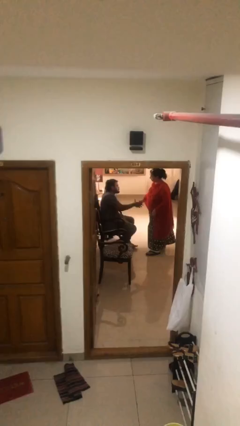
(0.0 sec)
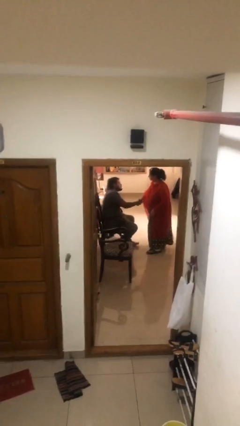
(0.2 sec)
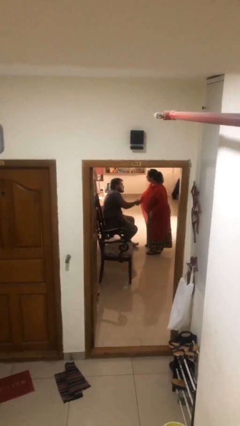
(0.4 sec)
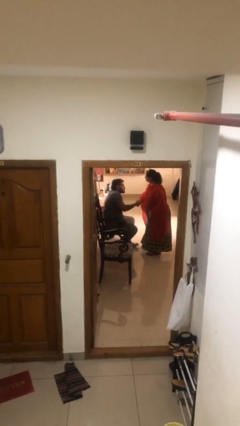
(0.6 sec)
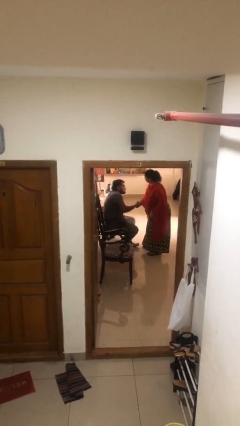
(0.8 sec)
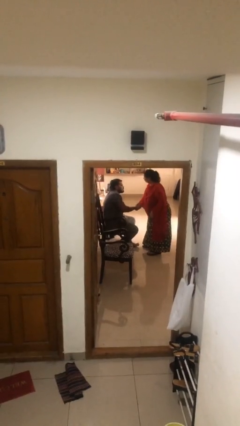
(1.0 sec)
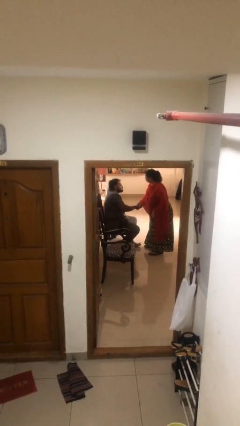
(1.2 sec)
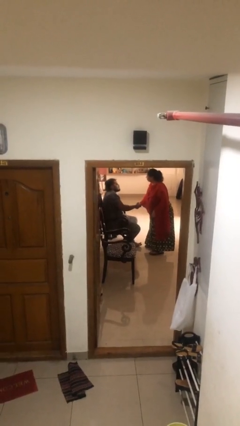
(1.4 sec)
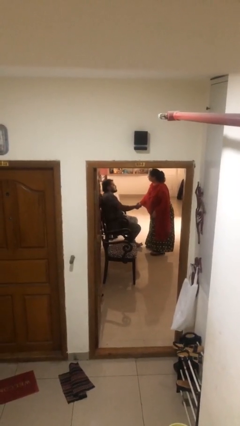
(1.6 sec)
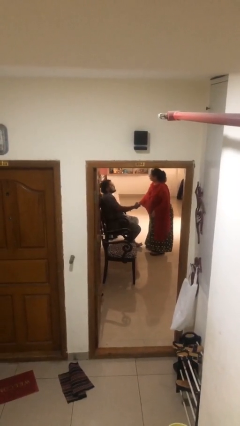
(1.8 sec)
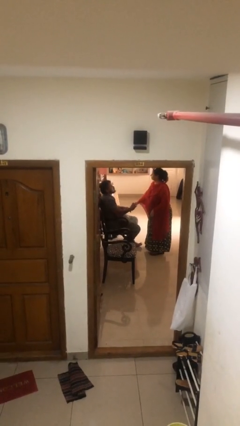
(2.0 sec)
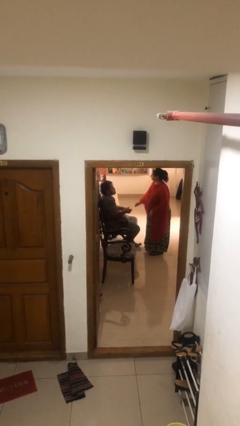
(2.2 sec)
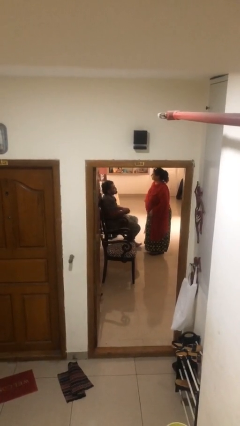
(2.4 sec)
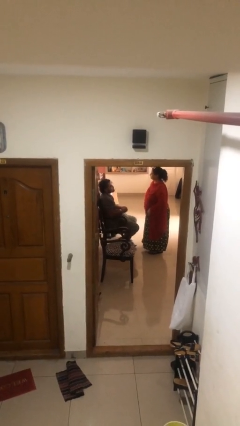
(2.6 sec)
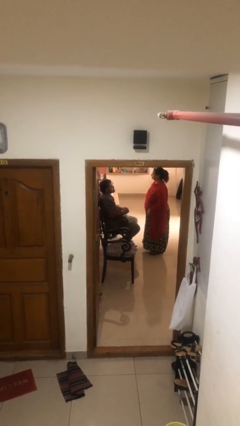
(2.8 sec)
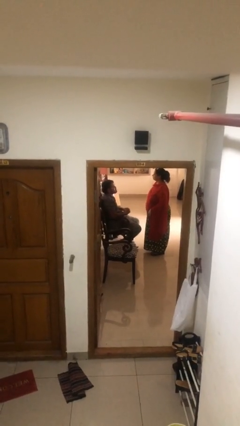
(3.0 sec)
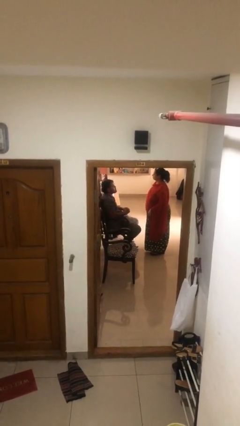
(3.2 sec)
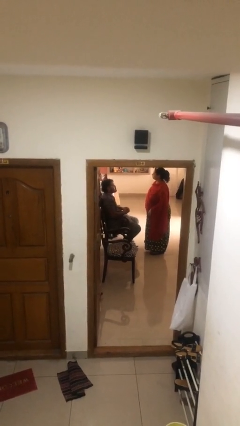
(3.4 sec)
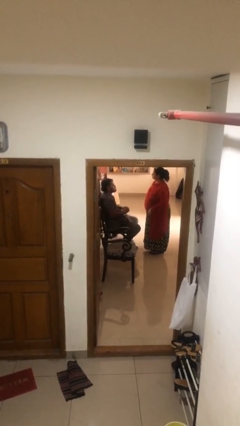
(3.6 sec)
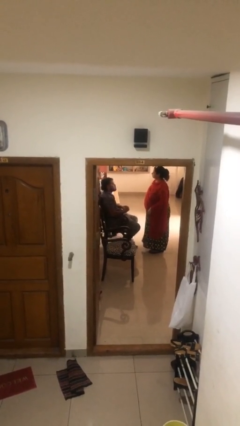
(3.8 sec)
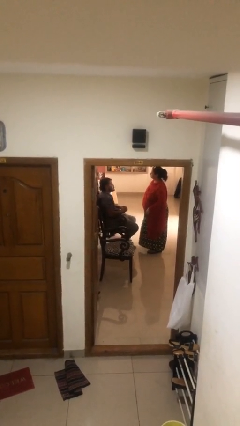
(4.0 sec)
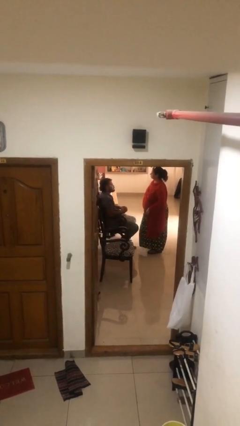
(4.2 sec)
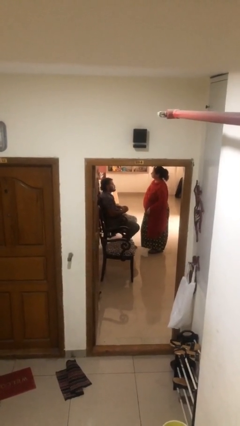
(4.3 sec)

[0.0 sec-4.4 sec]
person shakes hand

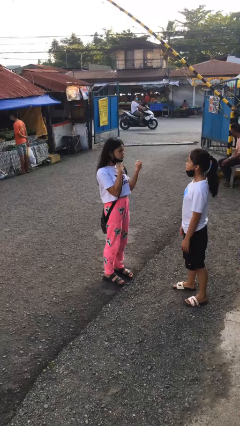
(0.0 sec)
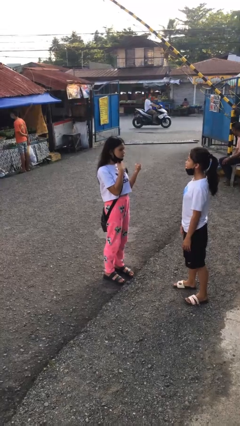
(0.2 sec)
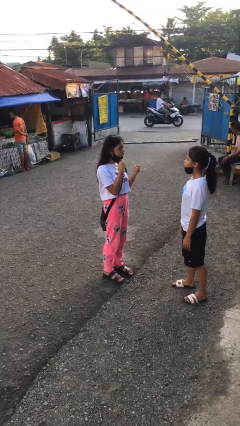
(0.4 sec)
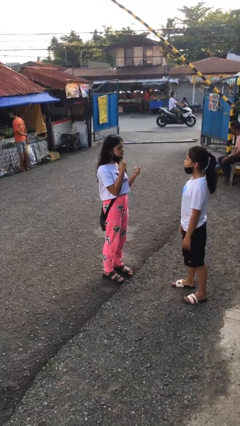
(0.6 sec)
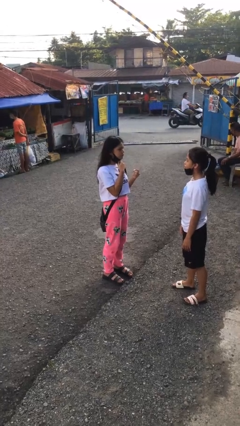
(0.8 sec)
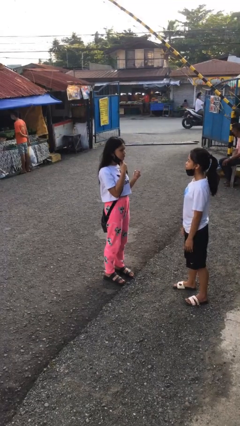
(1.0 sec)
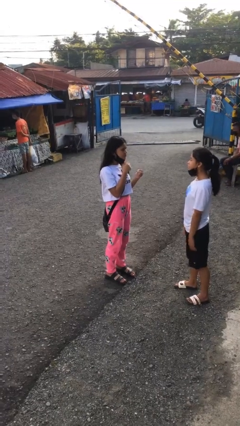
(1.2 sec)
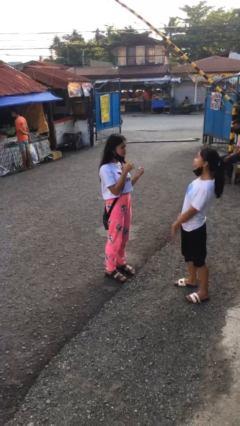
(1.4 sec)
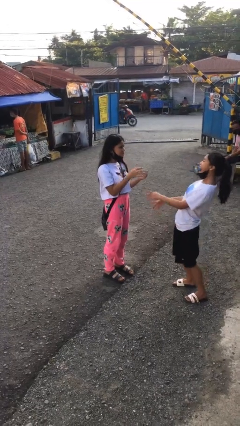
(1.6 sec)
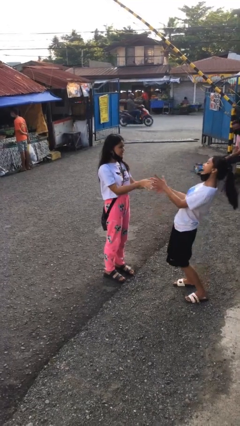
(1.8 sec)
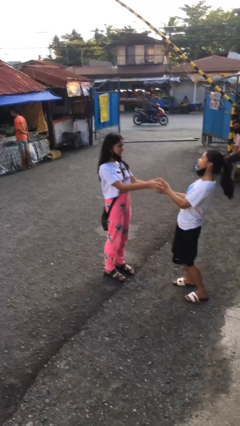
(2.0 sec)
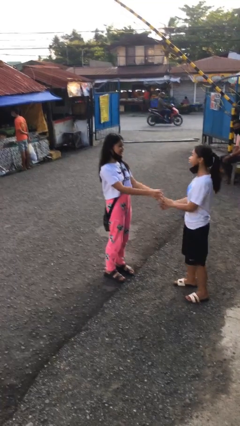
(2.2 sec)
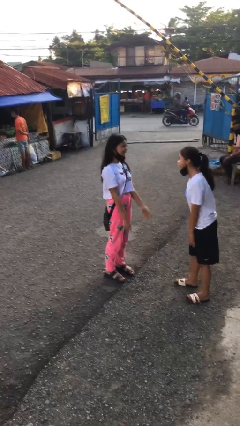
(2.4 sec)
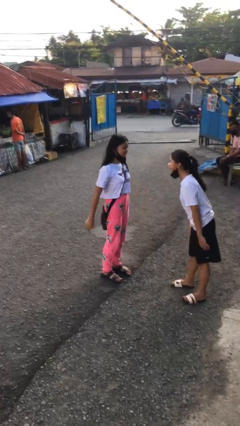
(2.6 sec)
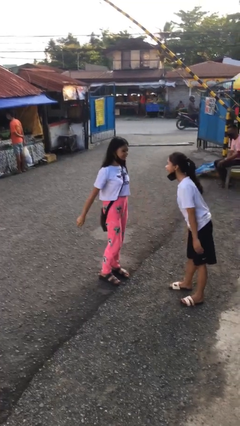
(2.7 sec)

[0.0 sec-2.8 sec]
person laughs with person

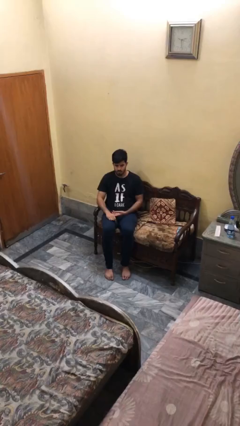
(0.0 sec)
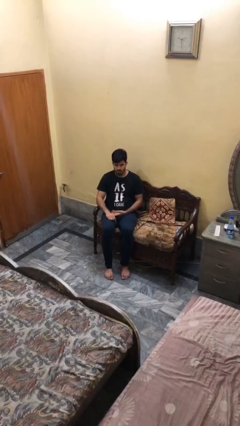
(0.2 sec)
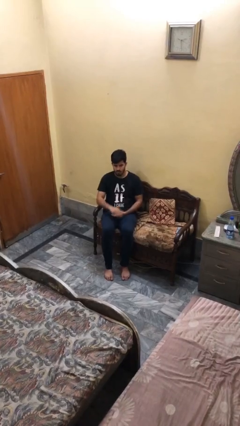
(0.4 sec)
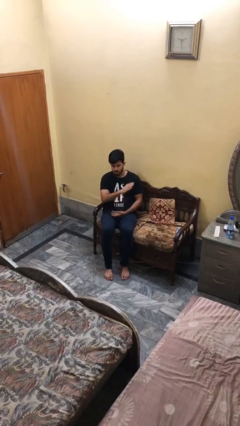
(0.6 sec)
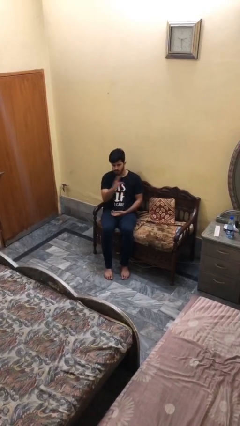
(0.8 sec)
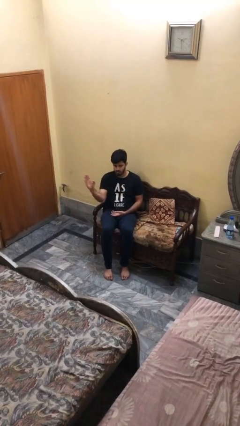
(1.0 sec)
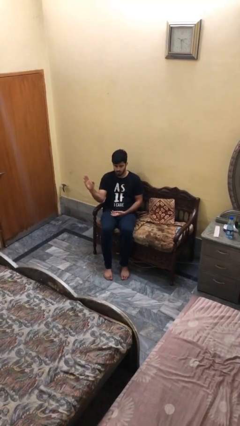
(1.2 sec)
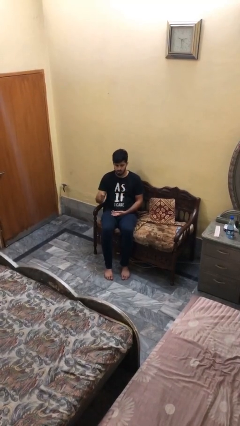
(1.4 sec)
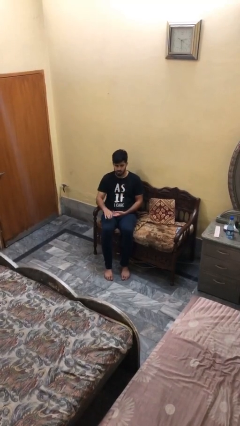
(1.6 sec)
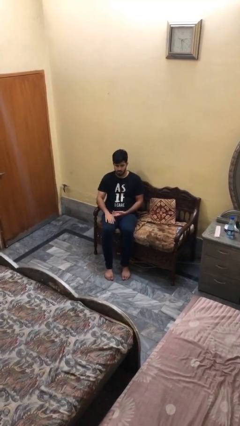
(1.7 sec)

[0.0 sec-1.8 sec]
person gestures swipe right

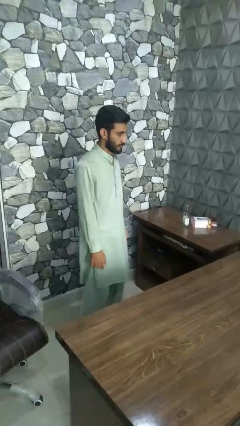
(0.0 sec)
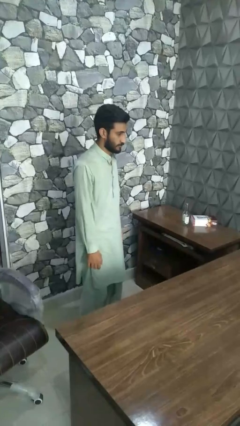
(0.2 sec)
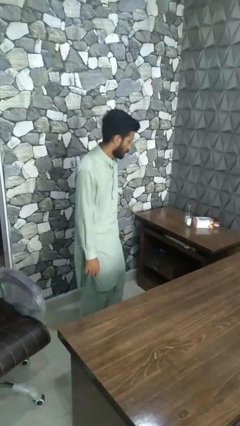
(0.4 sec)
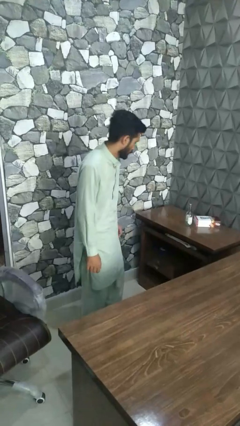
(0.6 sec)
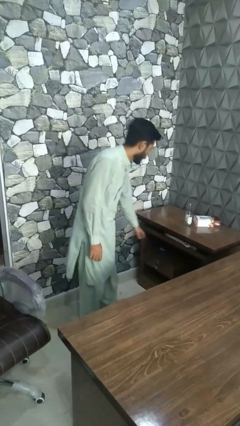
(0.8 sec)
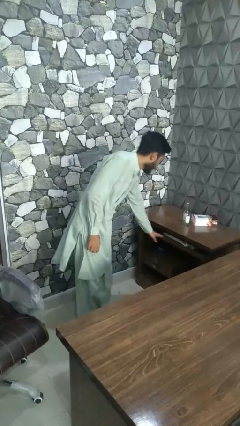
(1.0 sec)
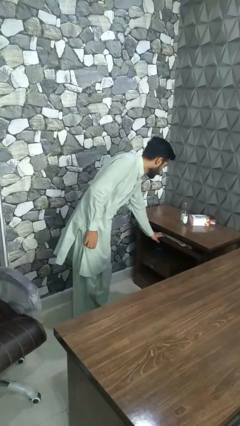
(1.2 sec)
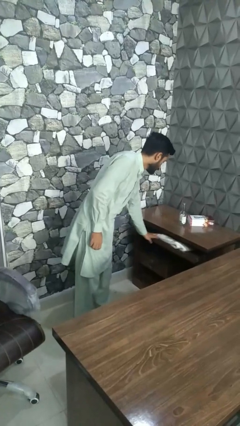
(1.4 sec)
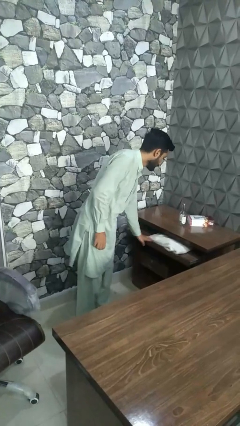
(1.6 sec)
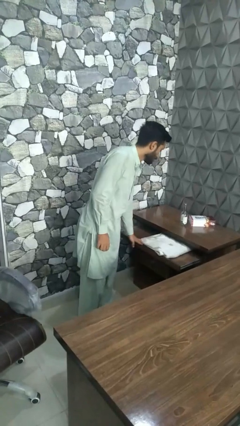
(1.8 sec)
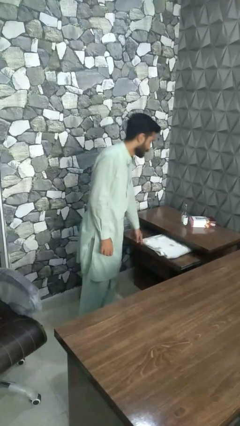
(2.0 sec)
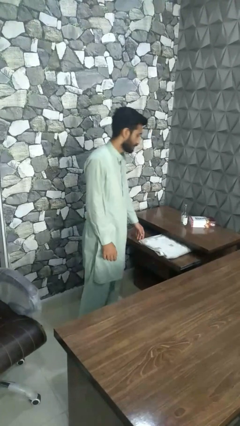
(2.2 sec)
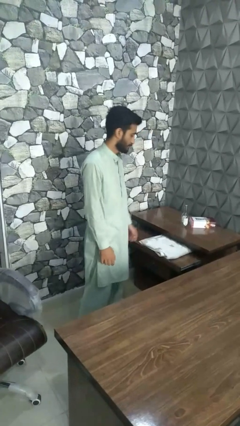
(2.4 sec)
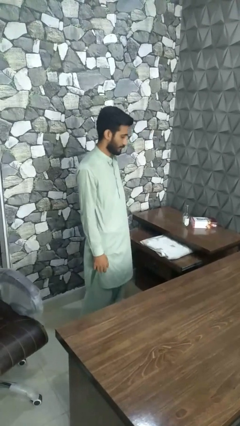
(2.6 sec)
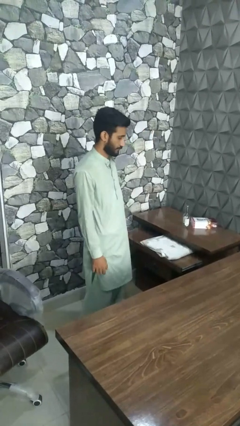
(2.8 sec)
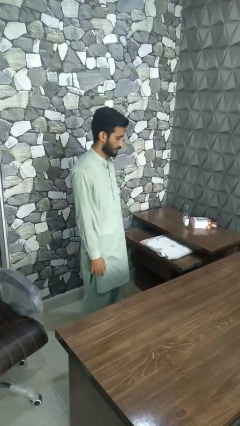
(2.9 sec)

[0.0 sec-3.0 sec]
person opens dresser drawer

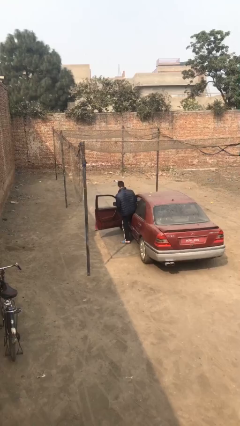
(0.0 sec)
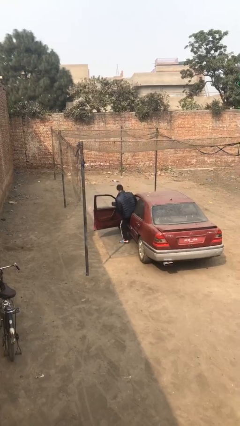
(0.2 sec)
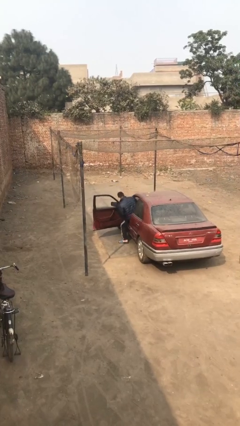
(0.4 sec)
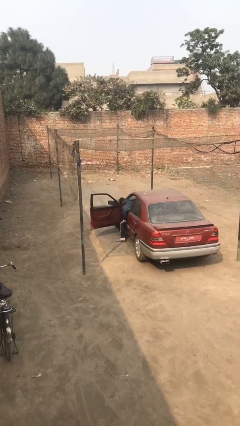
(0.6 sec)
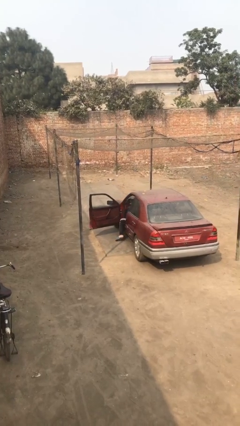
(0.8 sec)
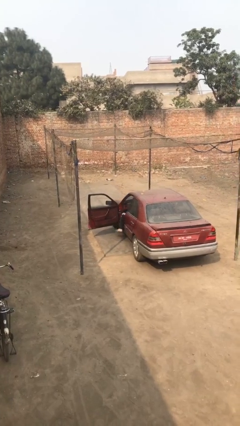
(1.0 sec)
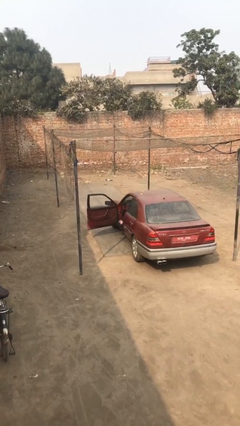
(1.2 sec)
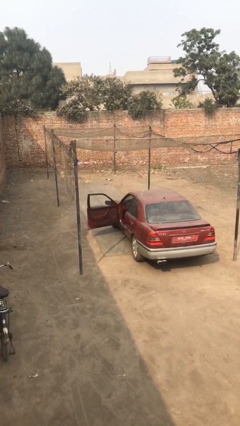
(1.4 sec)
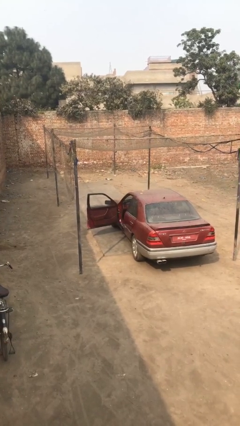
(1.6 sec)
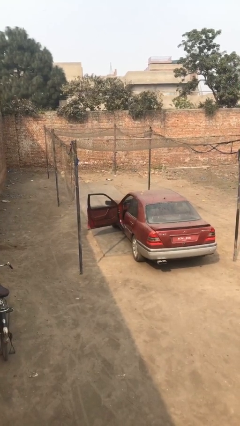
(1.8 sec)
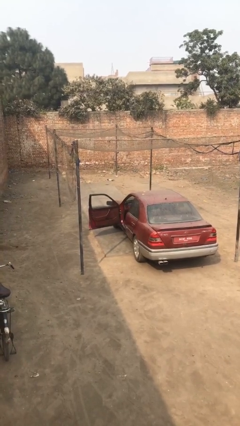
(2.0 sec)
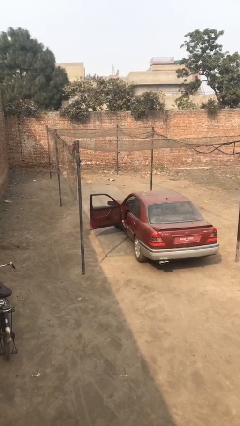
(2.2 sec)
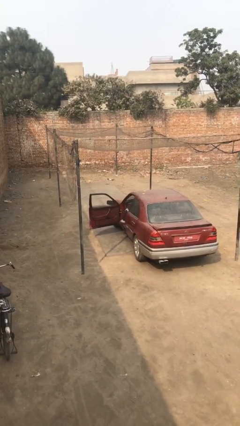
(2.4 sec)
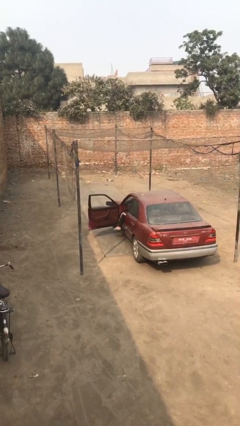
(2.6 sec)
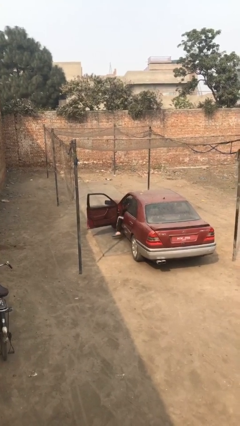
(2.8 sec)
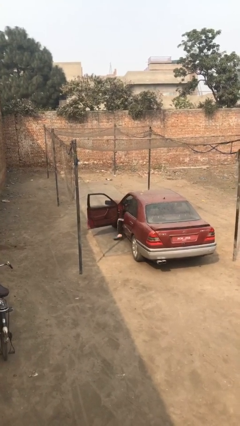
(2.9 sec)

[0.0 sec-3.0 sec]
person enters car

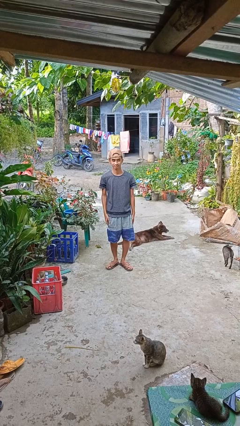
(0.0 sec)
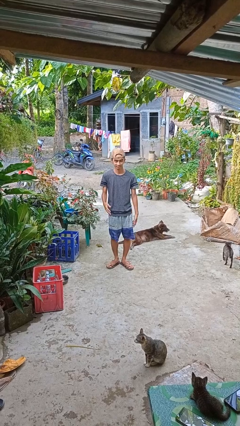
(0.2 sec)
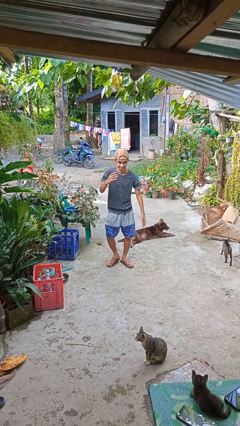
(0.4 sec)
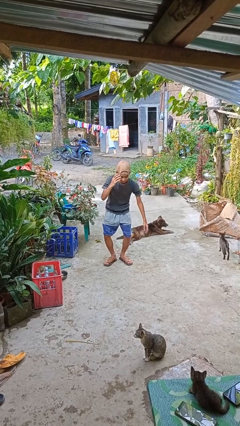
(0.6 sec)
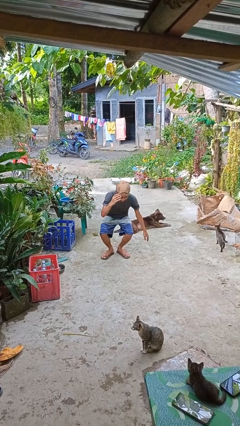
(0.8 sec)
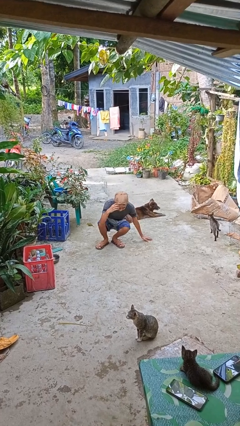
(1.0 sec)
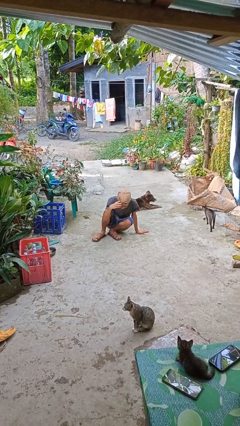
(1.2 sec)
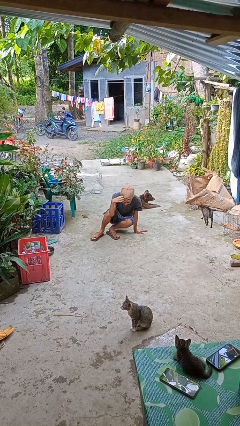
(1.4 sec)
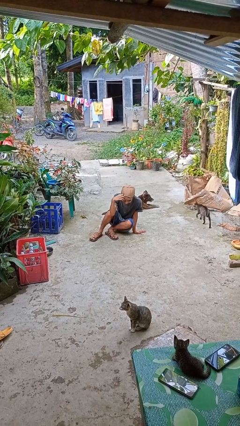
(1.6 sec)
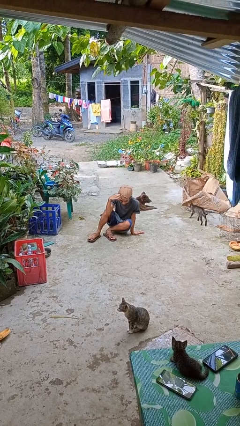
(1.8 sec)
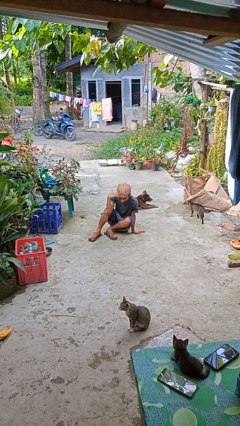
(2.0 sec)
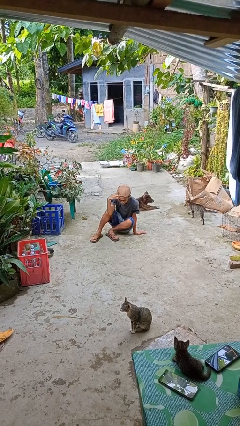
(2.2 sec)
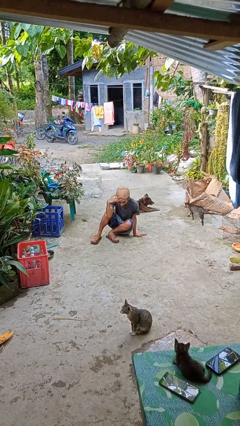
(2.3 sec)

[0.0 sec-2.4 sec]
person falls while standing
